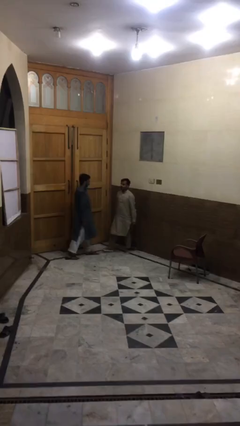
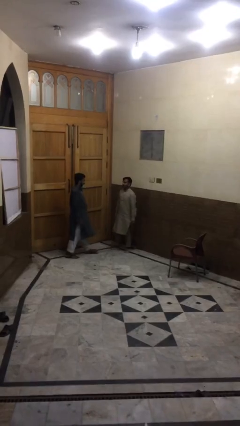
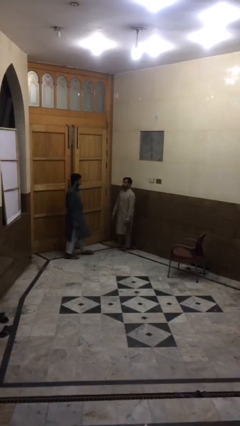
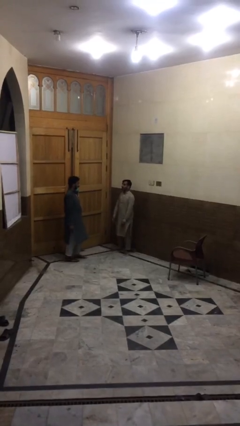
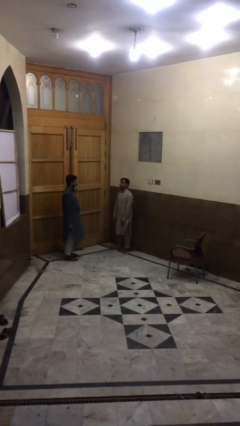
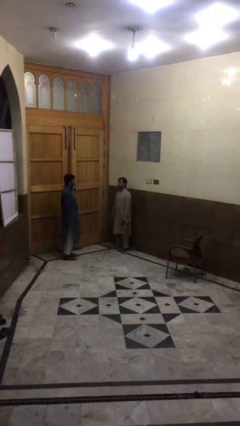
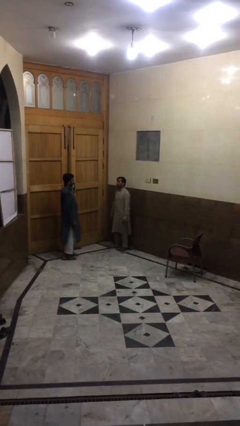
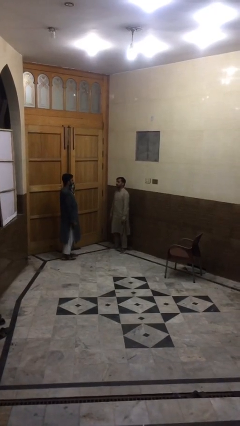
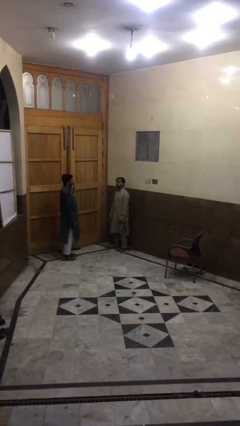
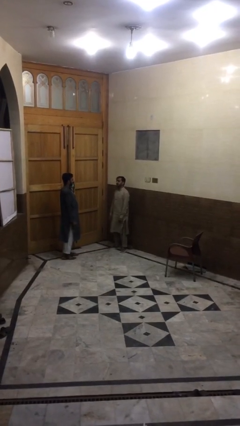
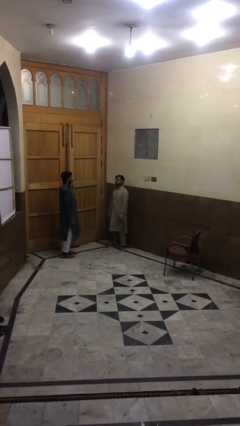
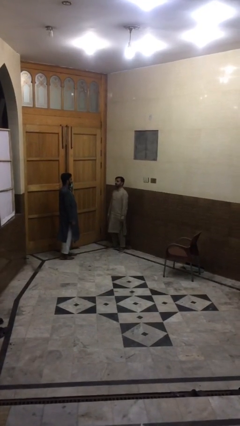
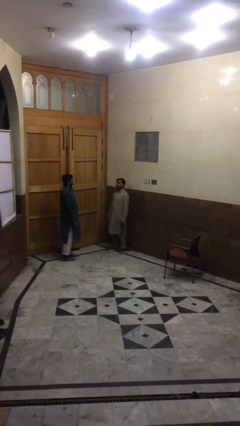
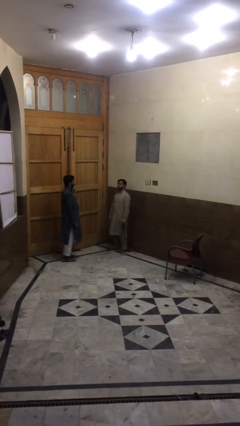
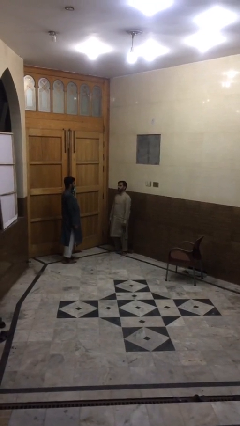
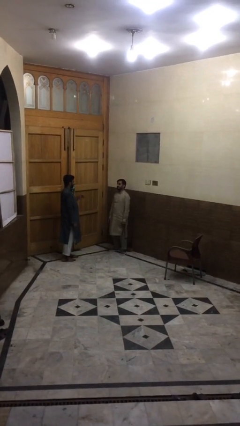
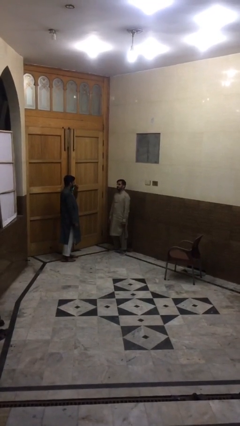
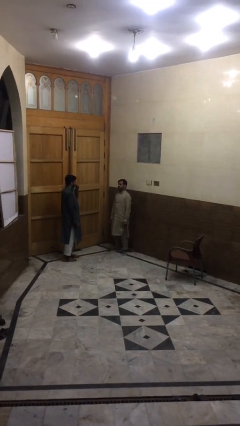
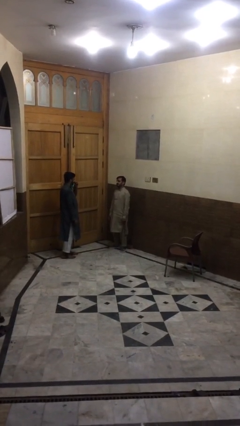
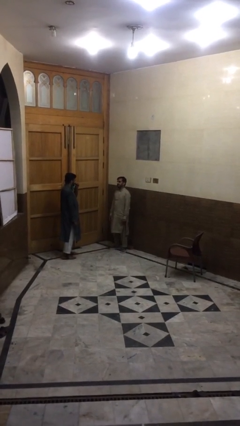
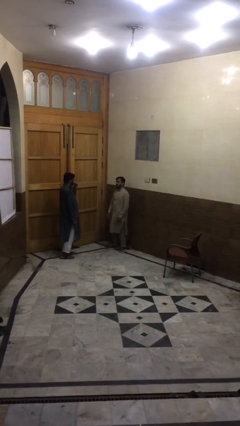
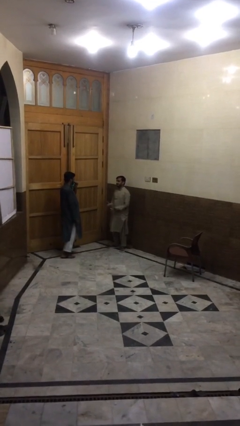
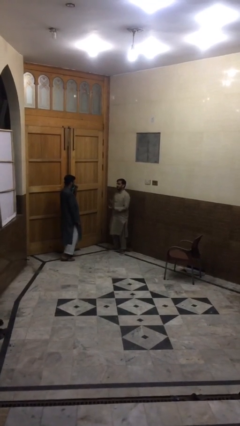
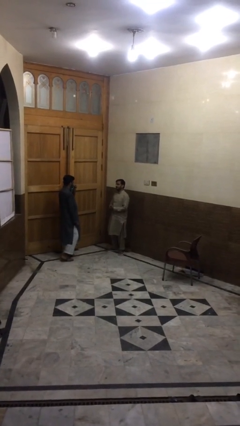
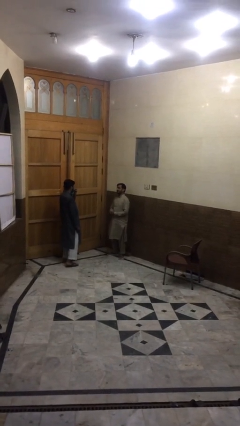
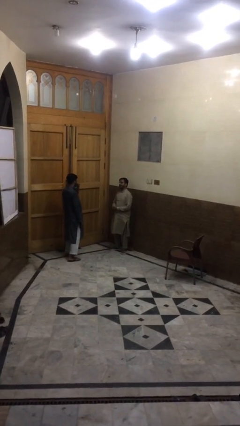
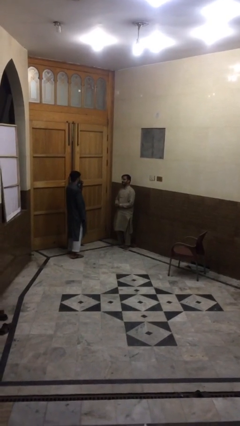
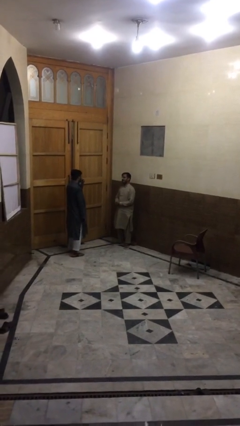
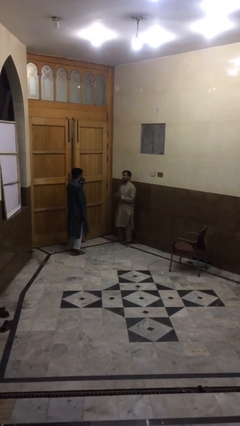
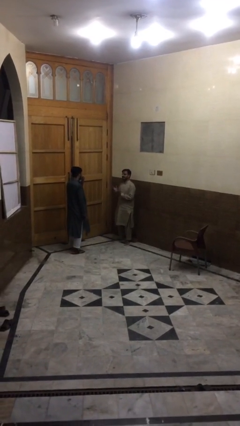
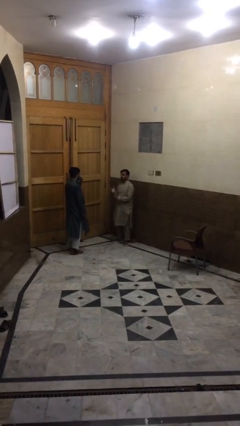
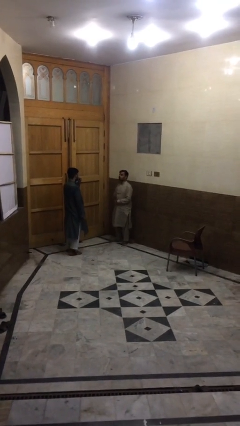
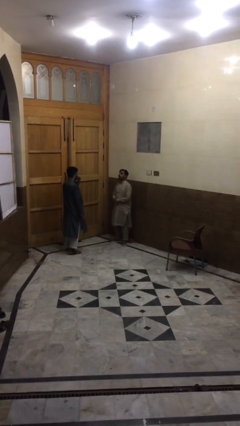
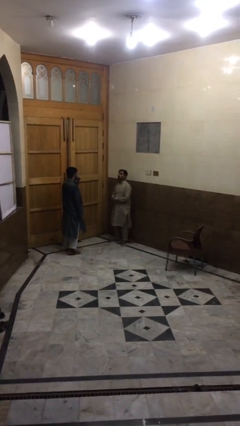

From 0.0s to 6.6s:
person talks to person

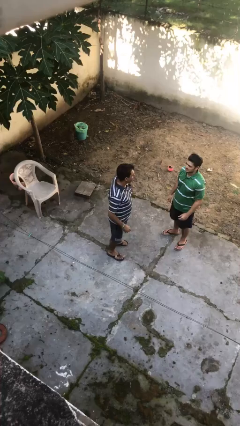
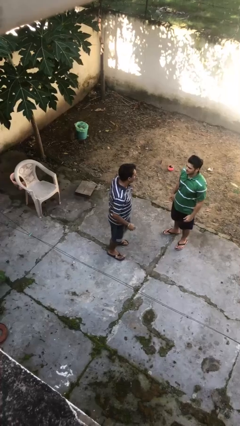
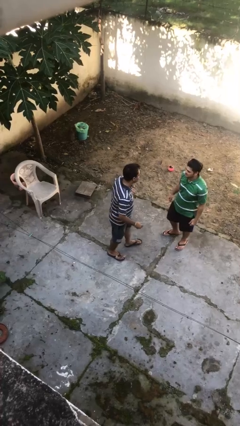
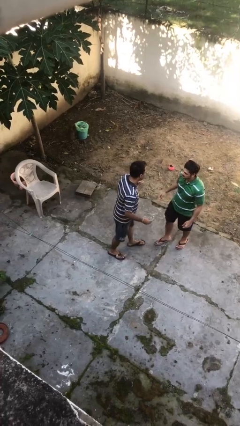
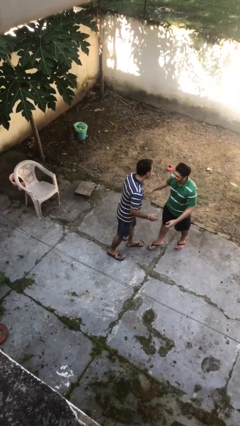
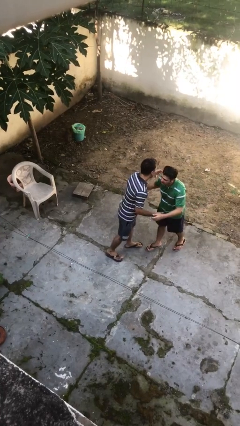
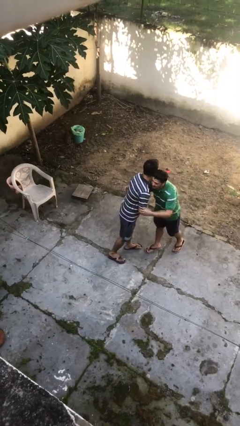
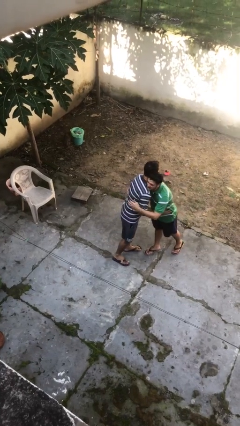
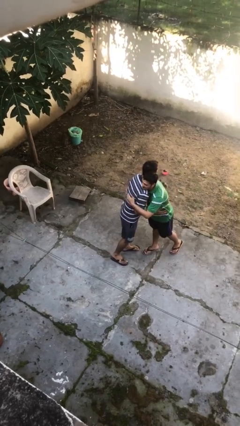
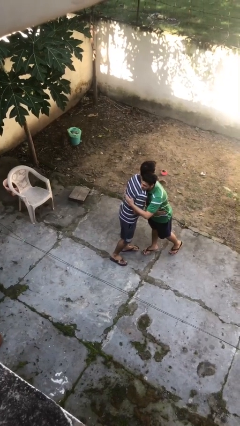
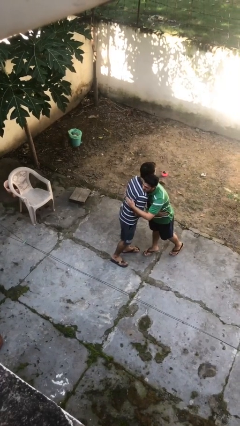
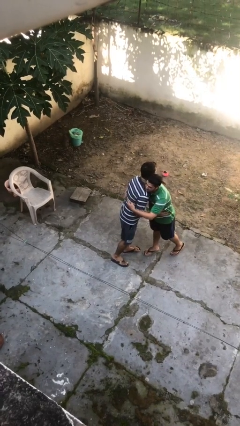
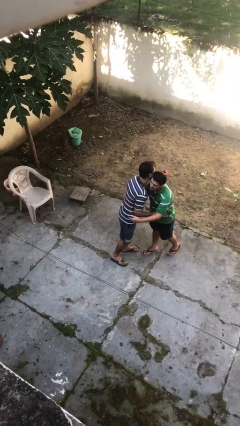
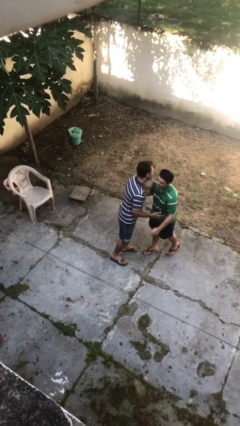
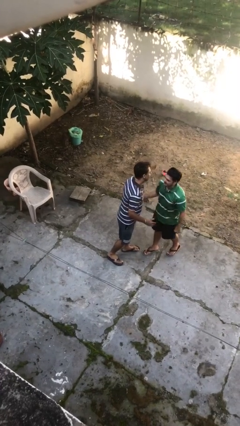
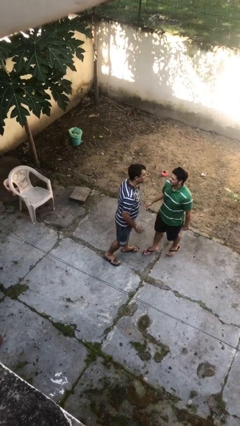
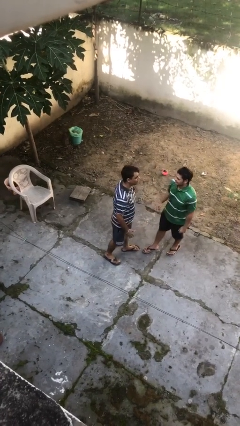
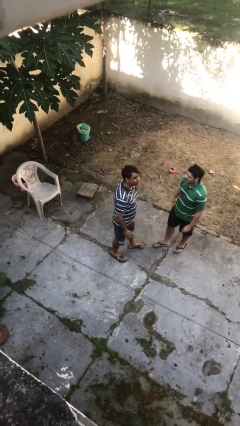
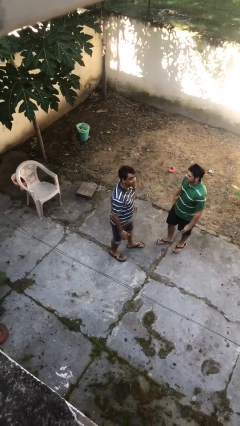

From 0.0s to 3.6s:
person embraces person

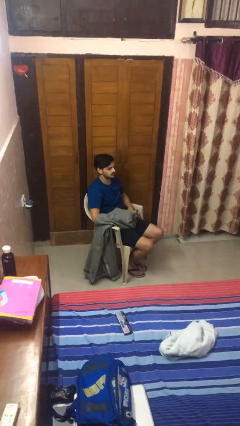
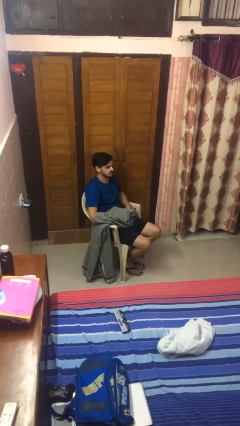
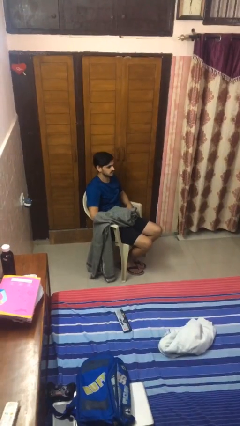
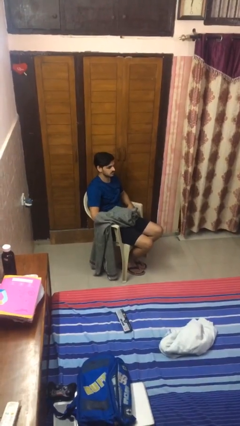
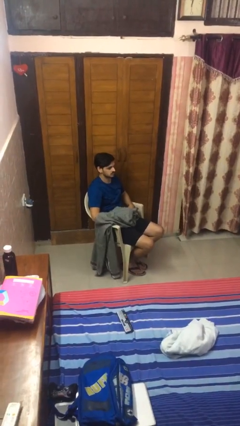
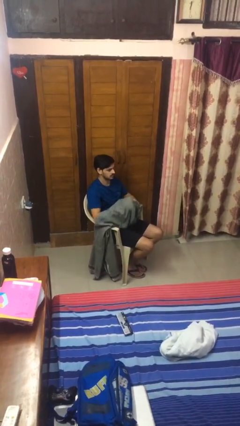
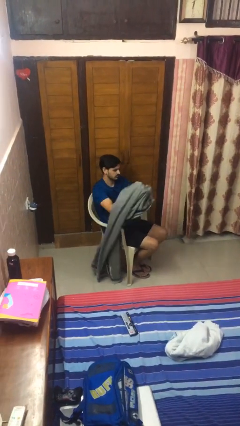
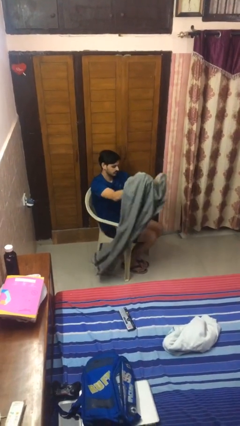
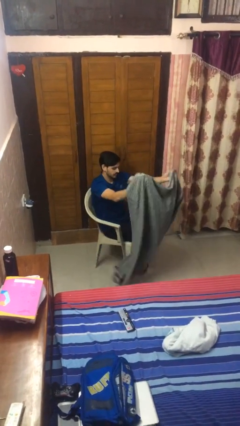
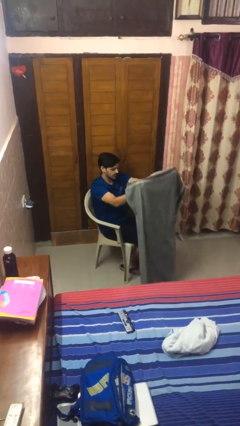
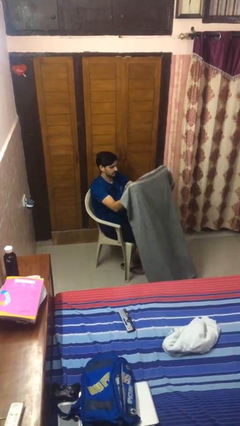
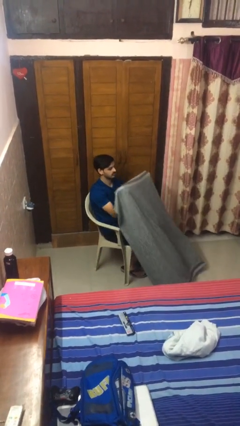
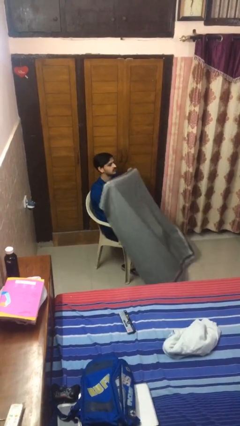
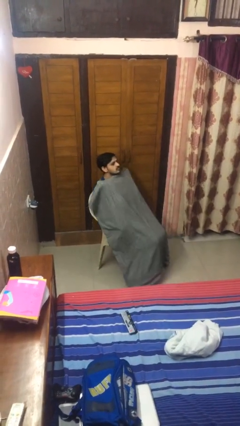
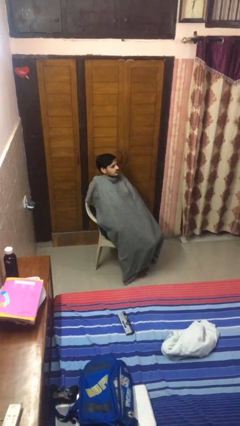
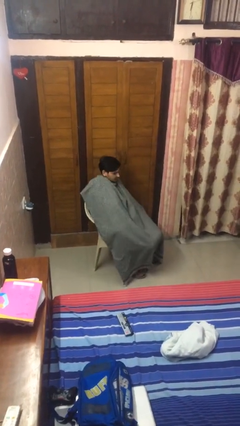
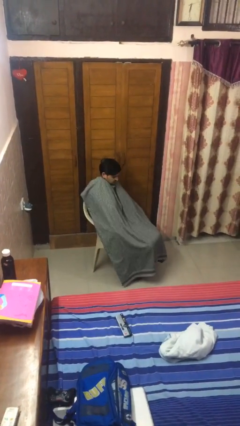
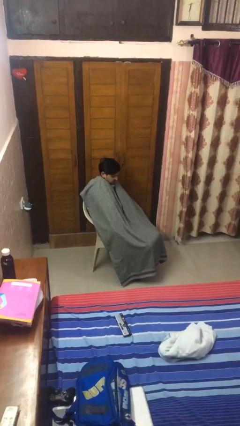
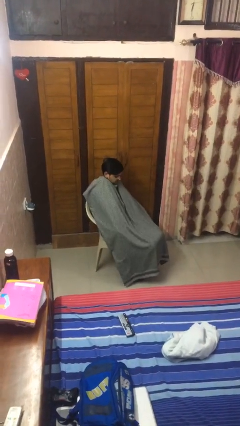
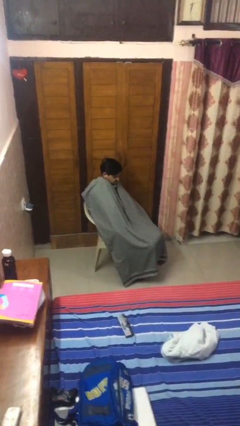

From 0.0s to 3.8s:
person covers with blanket

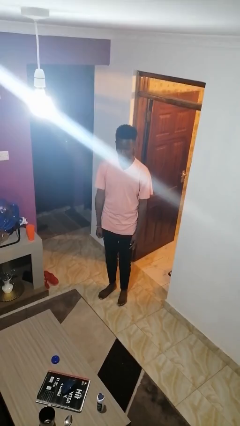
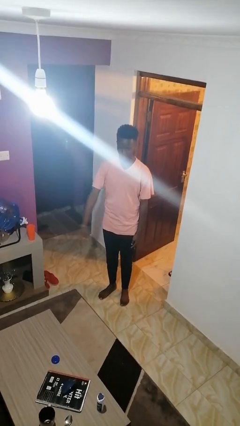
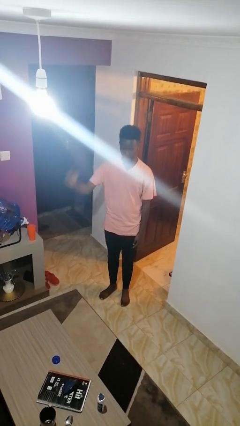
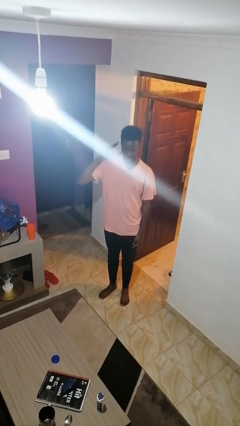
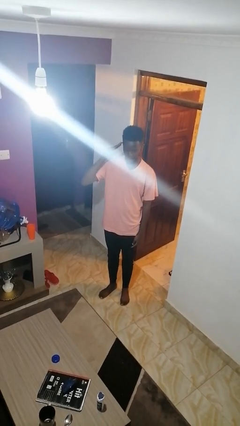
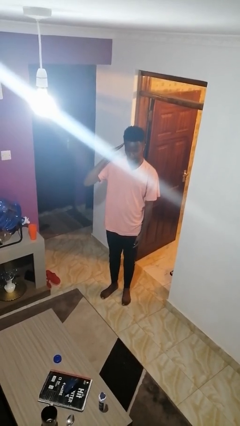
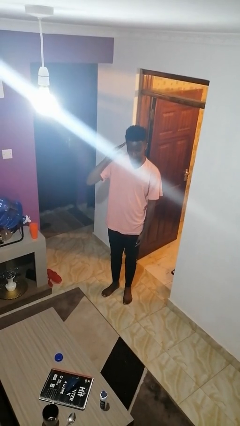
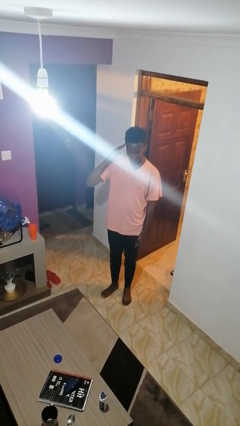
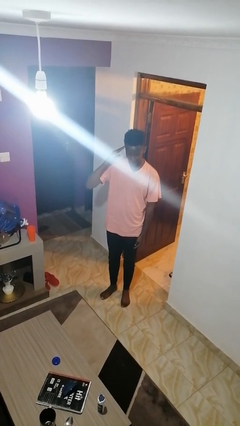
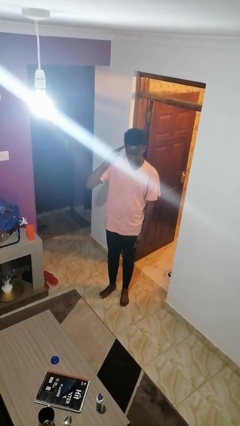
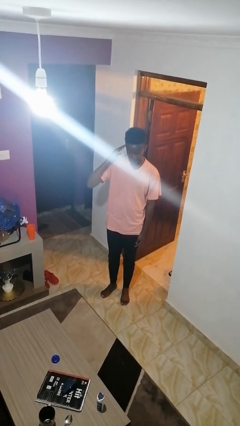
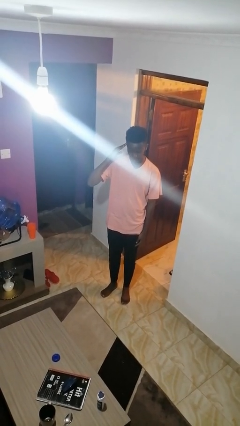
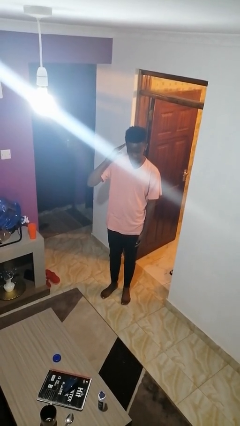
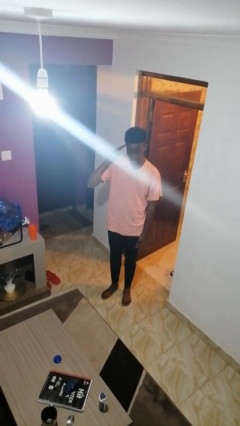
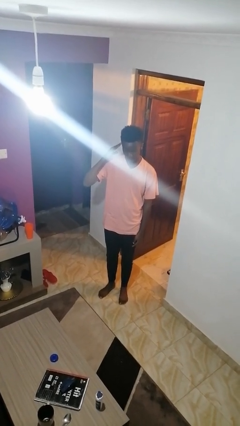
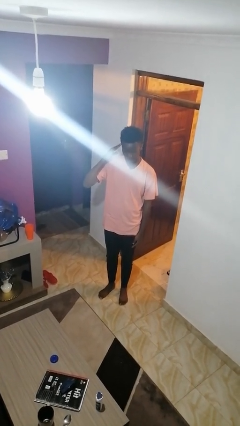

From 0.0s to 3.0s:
person salutes

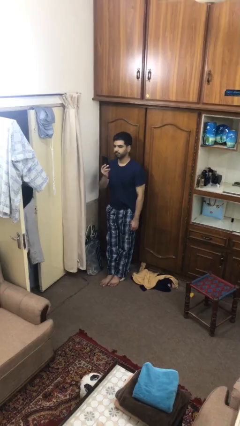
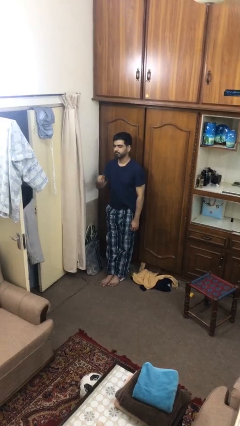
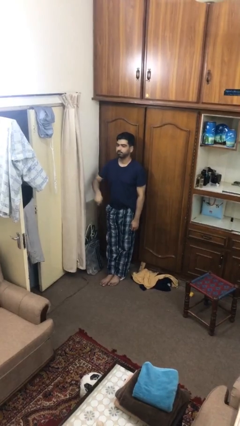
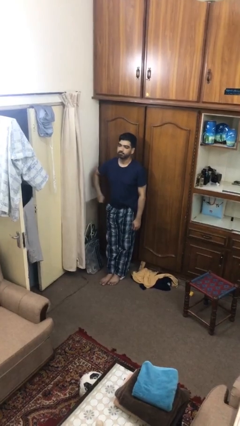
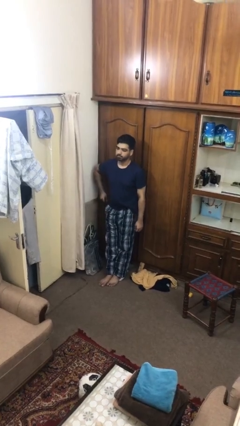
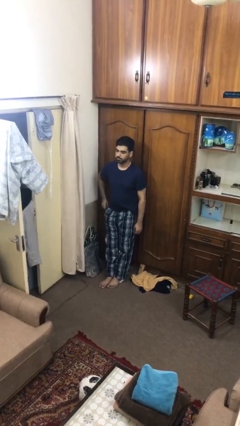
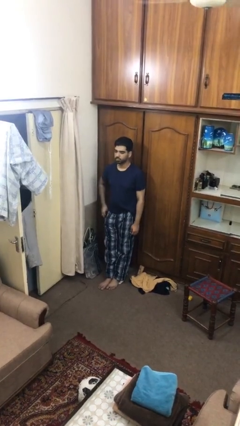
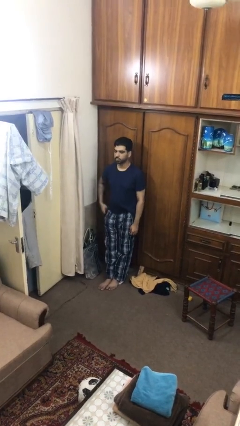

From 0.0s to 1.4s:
person puts phone into pocket
